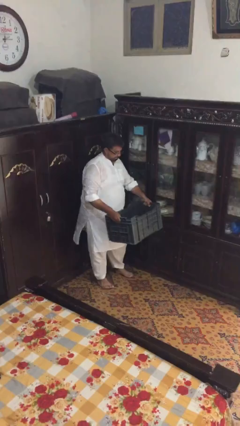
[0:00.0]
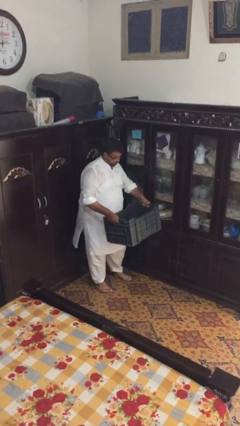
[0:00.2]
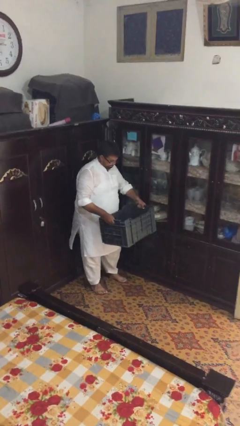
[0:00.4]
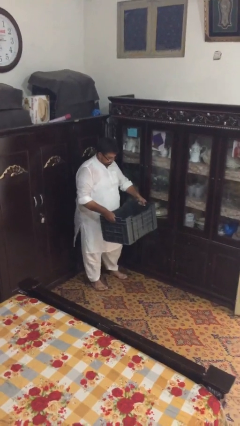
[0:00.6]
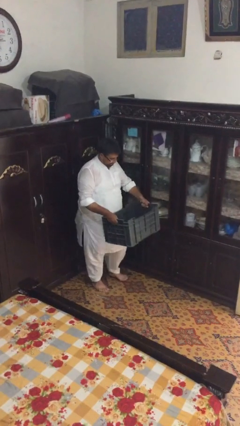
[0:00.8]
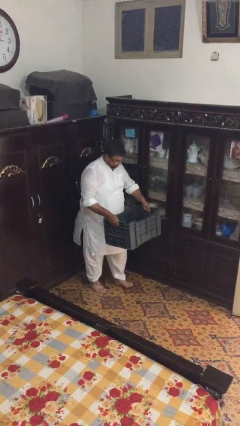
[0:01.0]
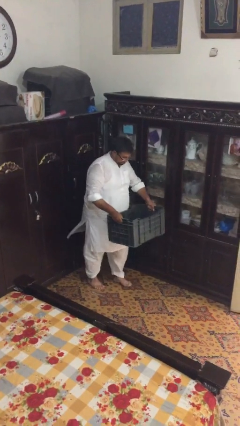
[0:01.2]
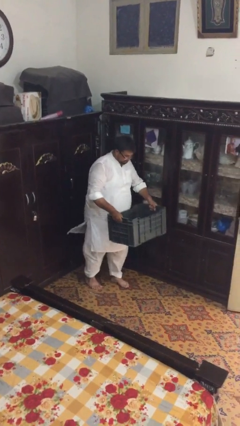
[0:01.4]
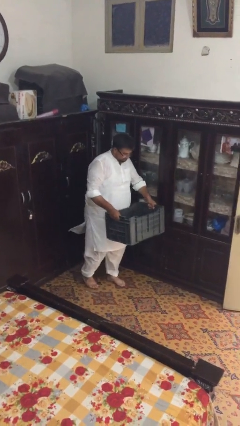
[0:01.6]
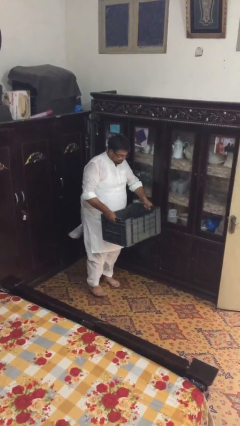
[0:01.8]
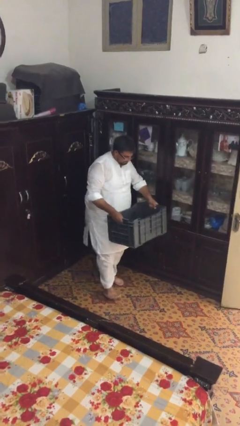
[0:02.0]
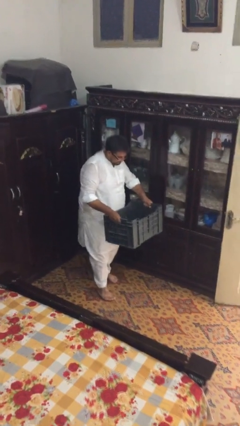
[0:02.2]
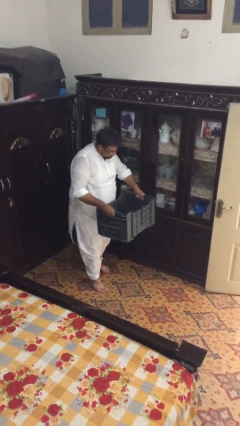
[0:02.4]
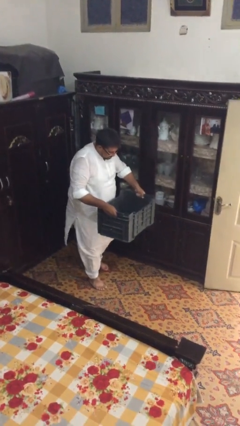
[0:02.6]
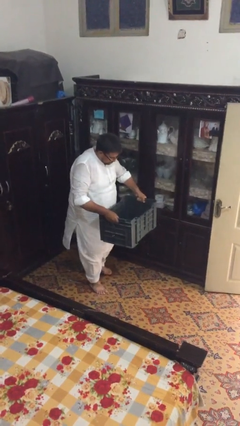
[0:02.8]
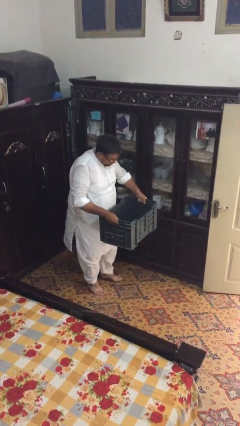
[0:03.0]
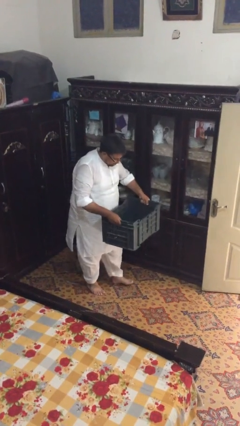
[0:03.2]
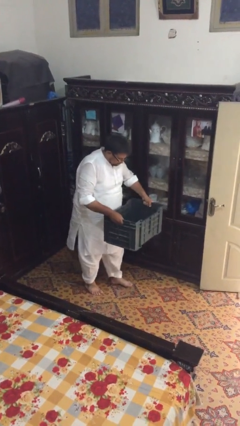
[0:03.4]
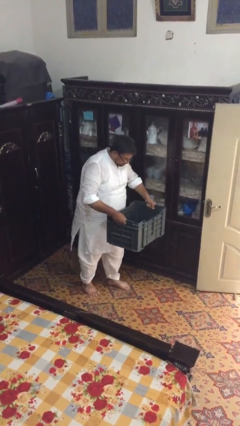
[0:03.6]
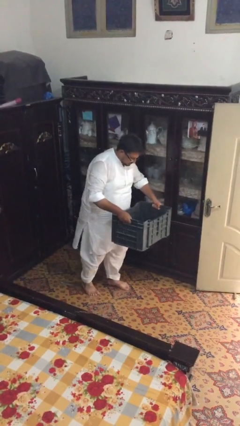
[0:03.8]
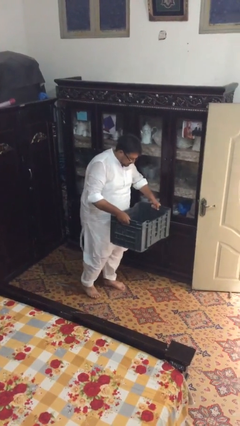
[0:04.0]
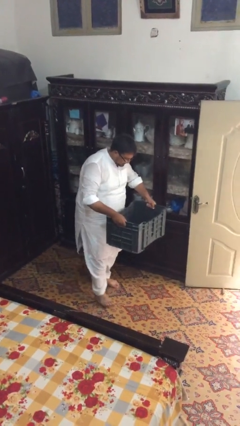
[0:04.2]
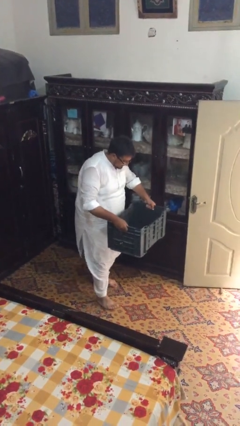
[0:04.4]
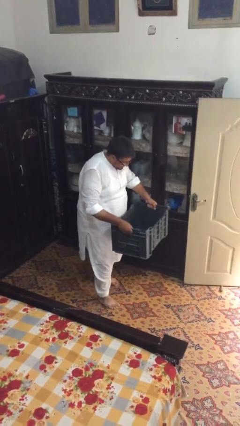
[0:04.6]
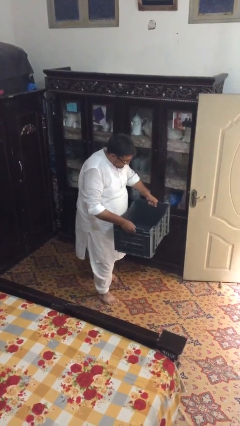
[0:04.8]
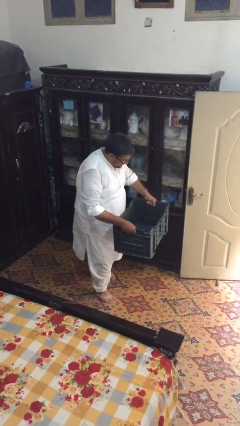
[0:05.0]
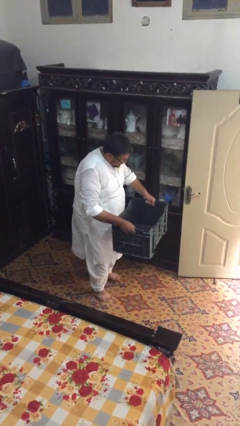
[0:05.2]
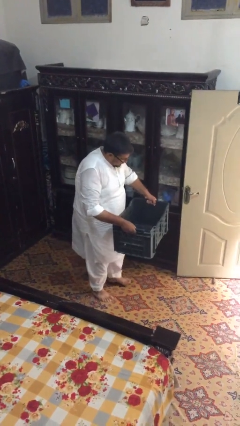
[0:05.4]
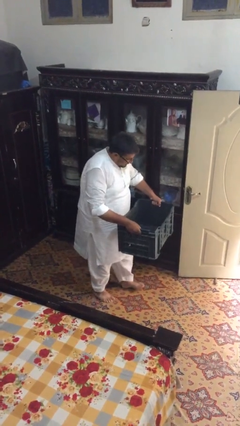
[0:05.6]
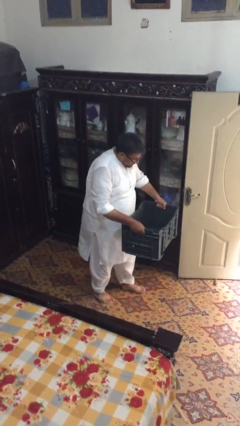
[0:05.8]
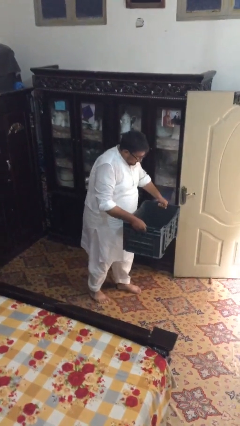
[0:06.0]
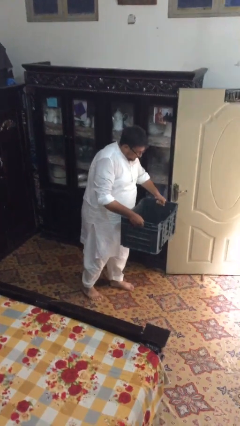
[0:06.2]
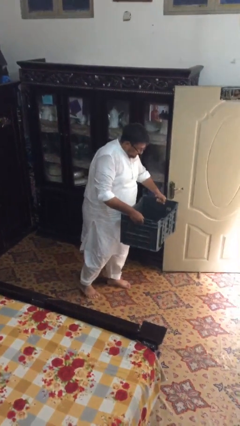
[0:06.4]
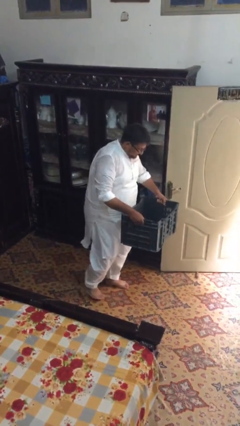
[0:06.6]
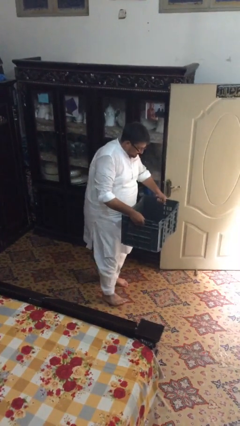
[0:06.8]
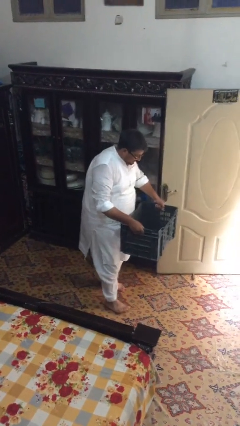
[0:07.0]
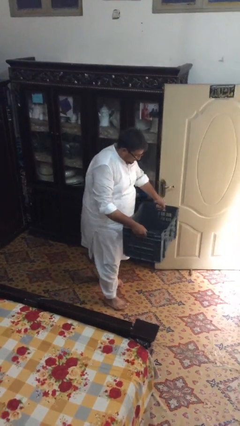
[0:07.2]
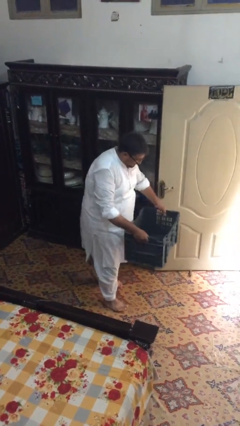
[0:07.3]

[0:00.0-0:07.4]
person carries heavy object

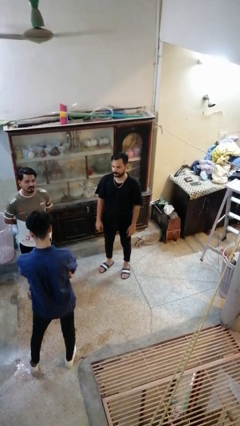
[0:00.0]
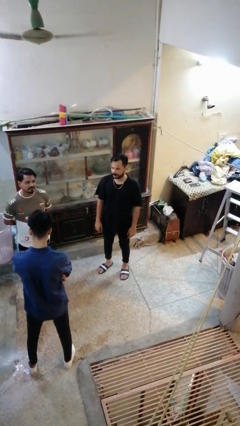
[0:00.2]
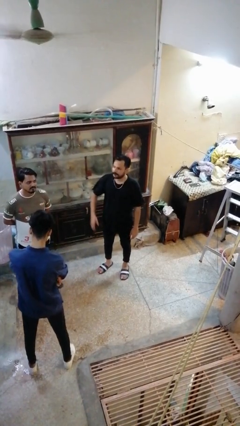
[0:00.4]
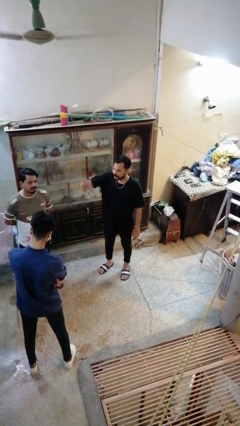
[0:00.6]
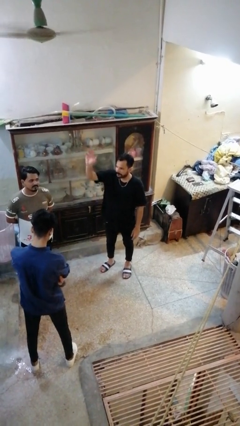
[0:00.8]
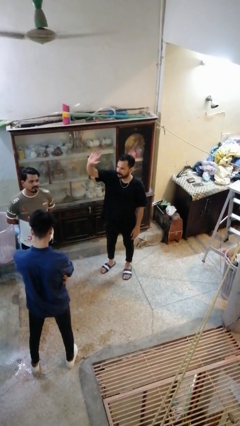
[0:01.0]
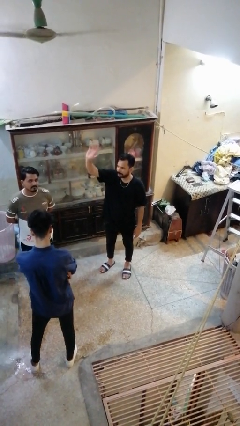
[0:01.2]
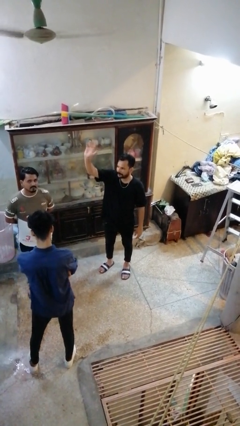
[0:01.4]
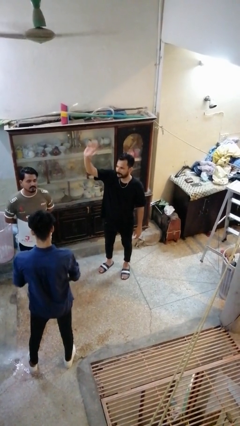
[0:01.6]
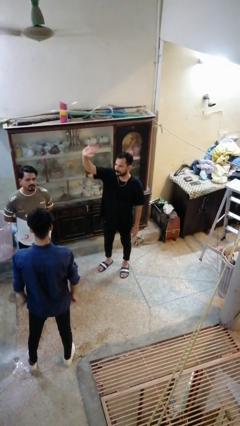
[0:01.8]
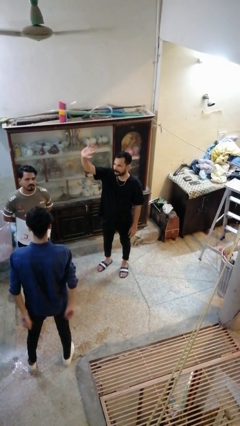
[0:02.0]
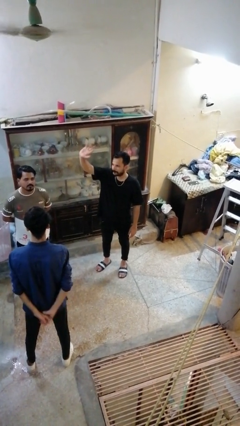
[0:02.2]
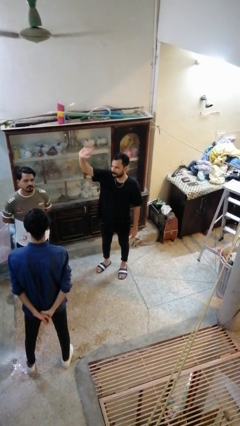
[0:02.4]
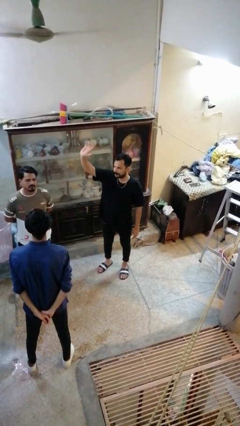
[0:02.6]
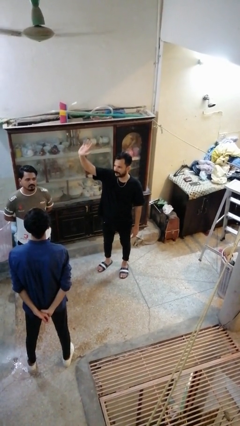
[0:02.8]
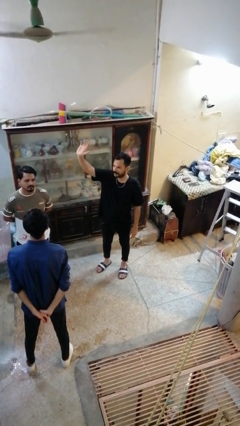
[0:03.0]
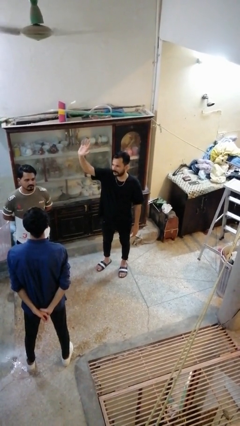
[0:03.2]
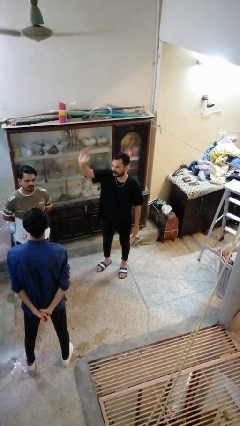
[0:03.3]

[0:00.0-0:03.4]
person waves at person

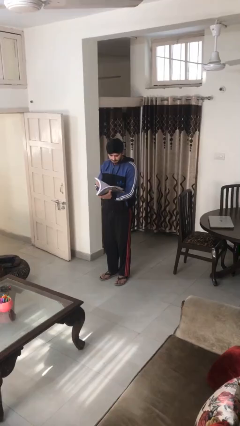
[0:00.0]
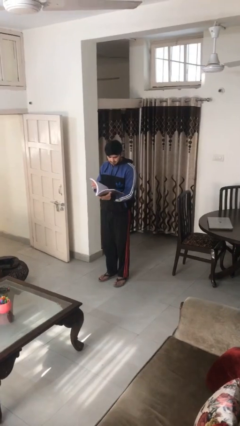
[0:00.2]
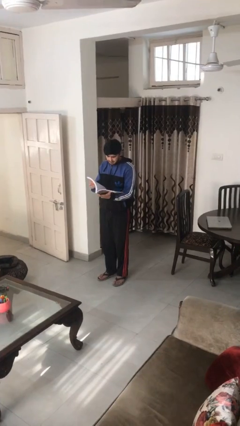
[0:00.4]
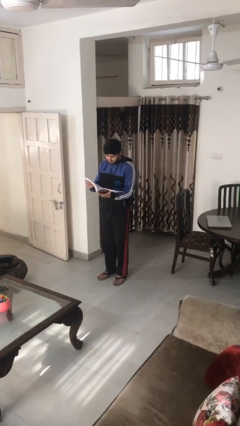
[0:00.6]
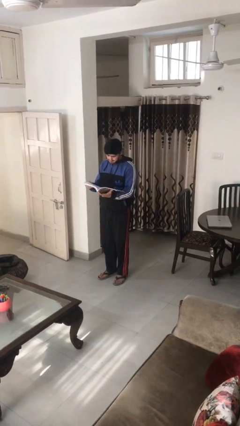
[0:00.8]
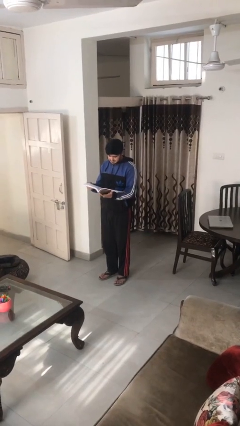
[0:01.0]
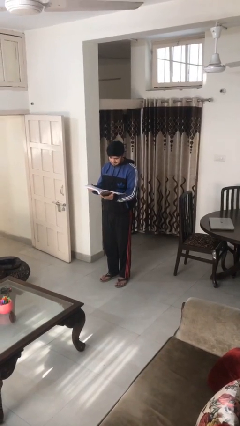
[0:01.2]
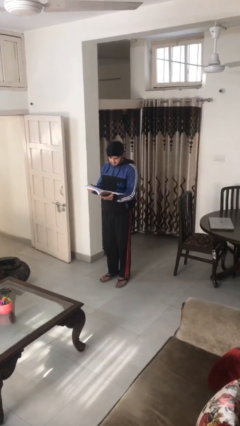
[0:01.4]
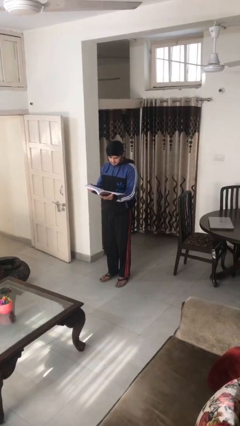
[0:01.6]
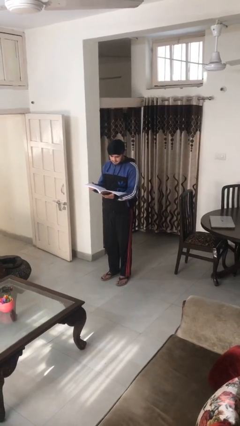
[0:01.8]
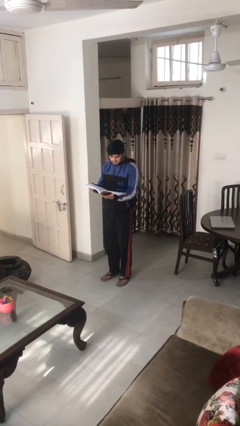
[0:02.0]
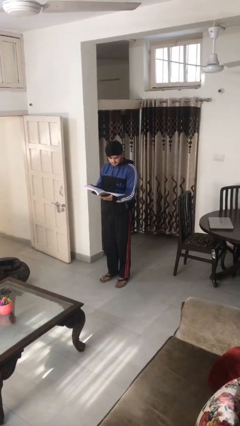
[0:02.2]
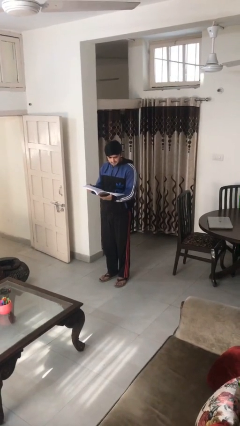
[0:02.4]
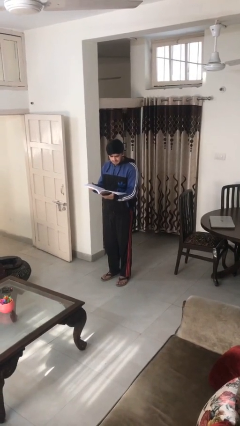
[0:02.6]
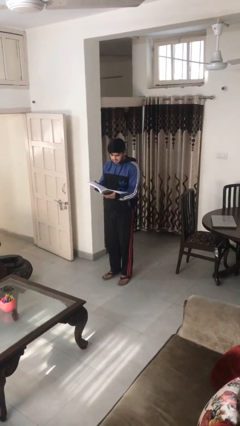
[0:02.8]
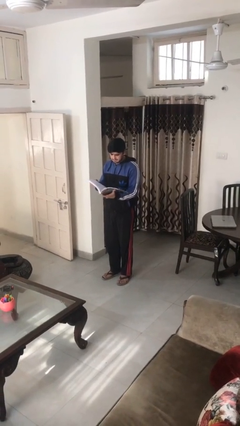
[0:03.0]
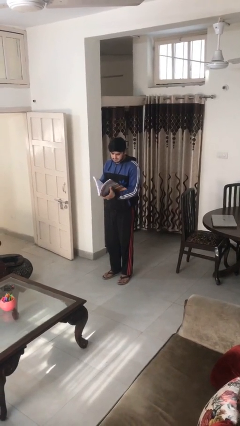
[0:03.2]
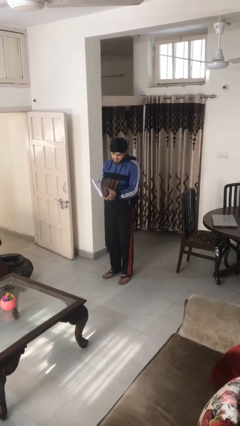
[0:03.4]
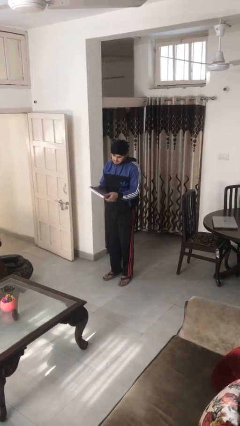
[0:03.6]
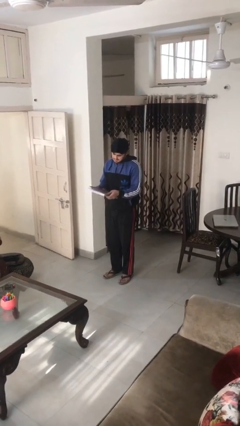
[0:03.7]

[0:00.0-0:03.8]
person reads document

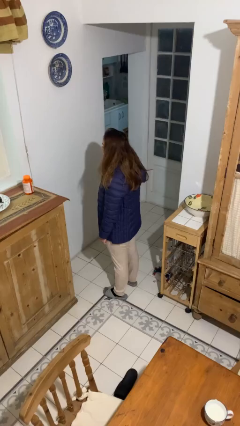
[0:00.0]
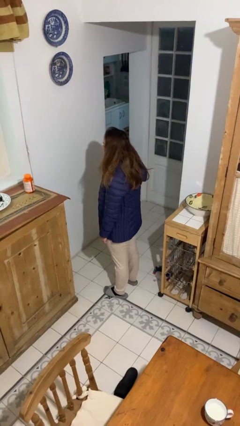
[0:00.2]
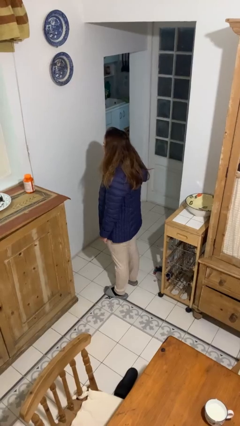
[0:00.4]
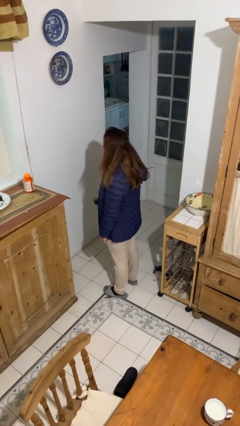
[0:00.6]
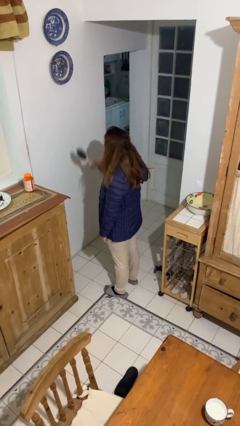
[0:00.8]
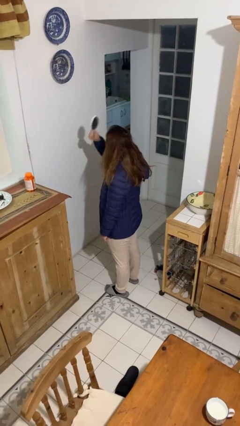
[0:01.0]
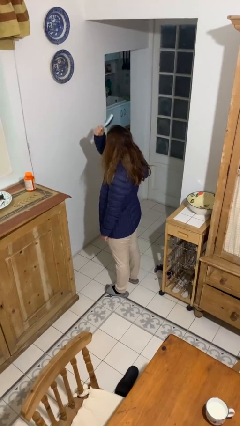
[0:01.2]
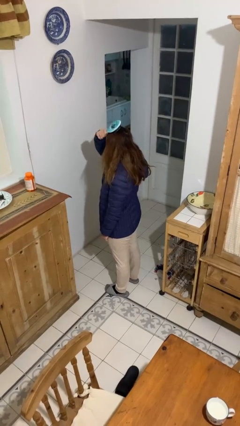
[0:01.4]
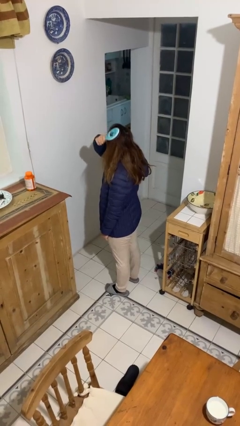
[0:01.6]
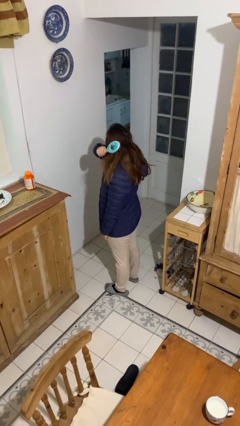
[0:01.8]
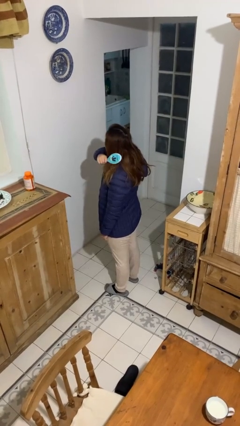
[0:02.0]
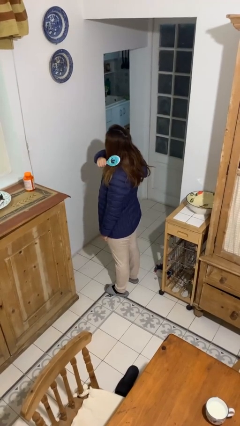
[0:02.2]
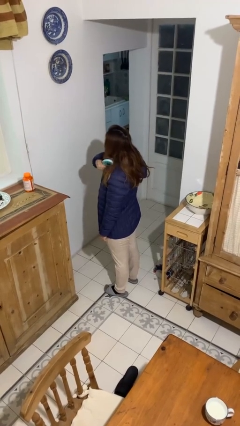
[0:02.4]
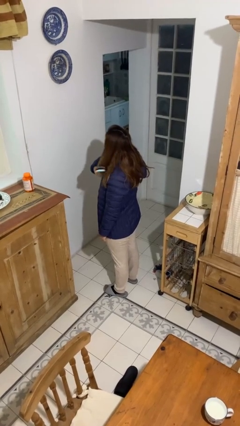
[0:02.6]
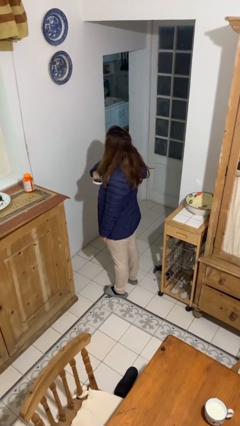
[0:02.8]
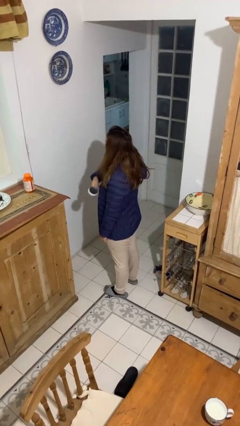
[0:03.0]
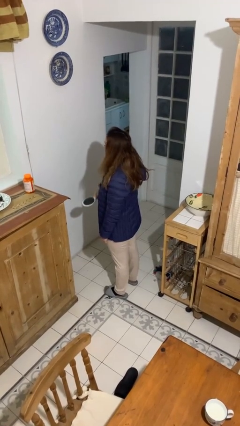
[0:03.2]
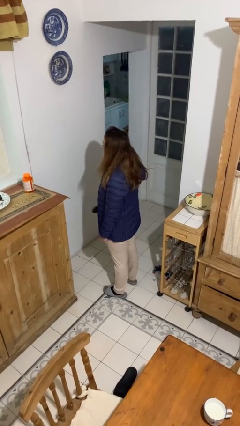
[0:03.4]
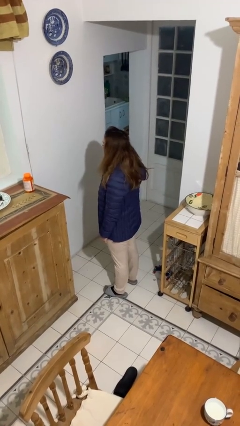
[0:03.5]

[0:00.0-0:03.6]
person brushes hair
